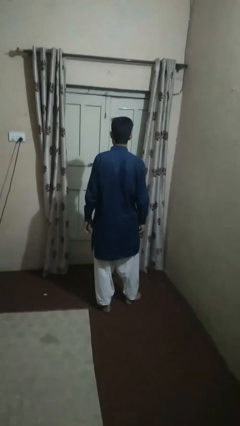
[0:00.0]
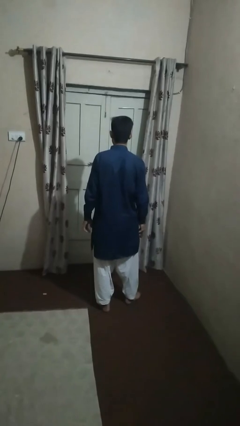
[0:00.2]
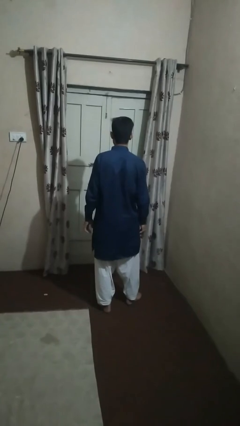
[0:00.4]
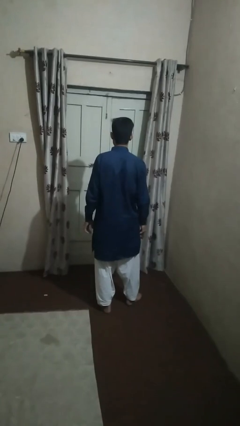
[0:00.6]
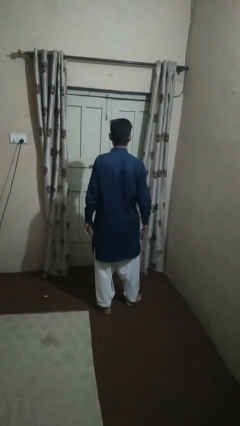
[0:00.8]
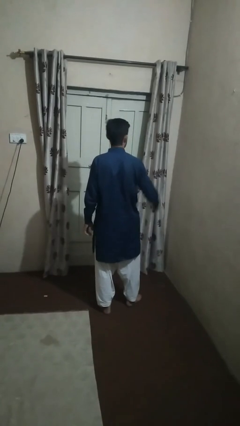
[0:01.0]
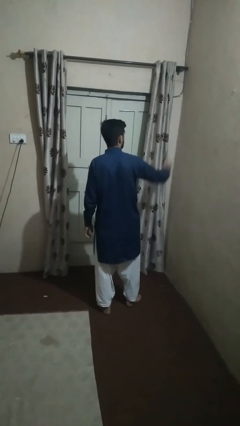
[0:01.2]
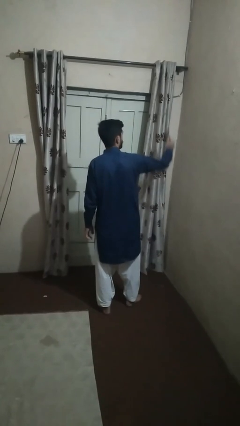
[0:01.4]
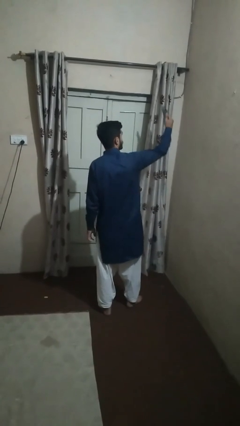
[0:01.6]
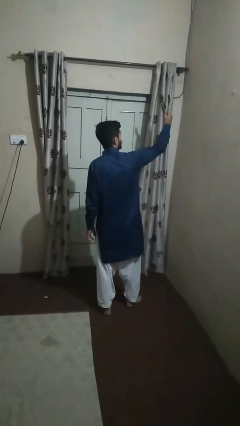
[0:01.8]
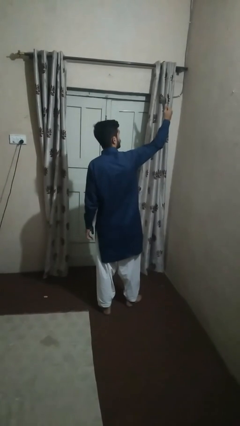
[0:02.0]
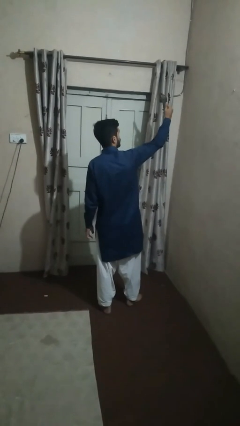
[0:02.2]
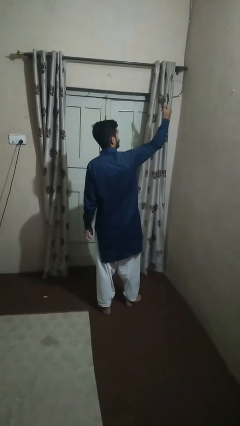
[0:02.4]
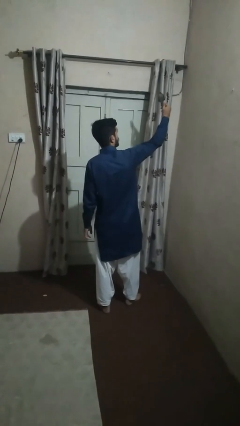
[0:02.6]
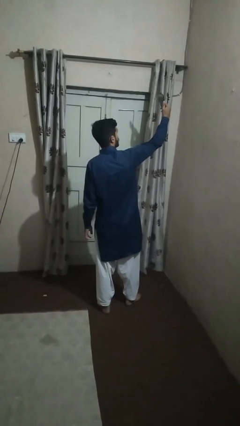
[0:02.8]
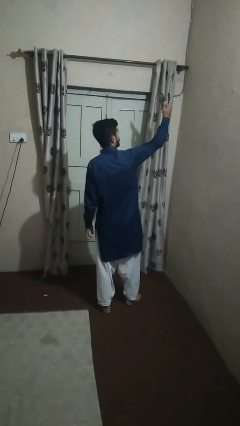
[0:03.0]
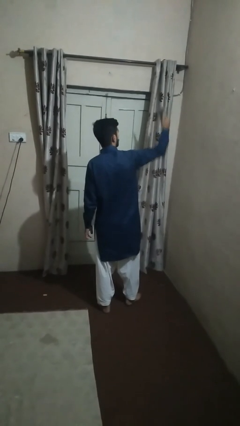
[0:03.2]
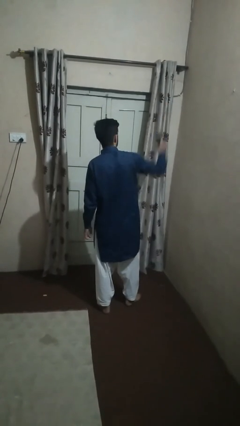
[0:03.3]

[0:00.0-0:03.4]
person takes selfie

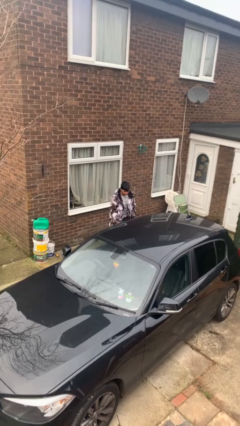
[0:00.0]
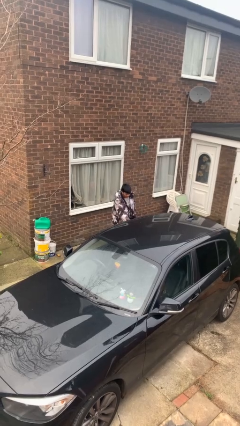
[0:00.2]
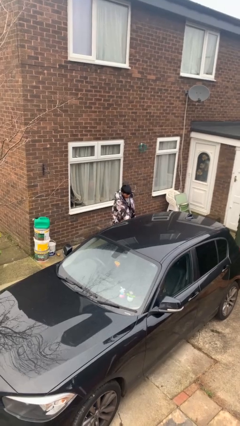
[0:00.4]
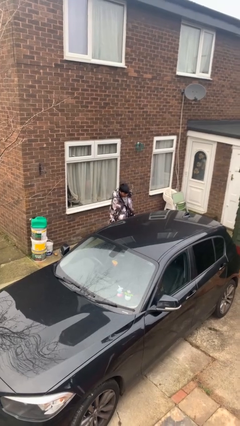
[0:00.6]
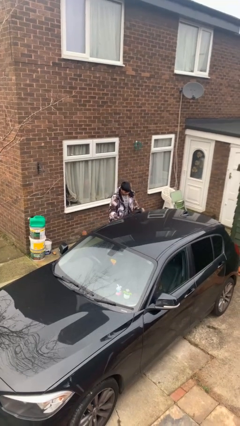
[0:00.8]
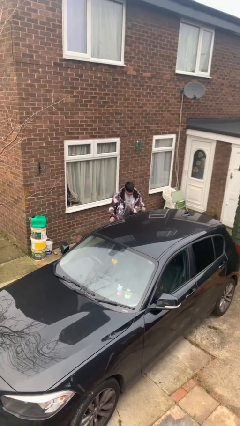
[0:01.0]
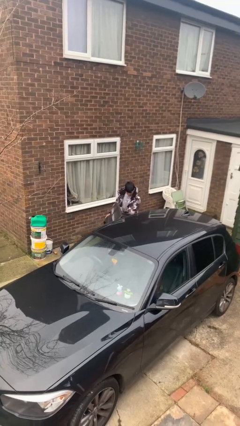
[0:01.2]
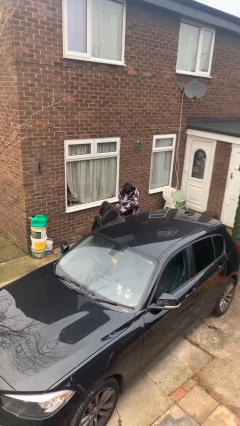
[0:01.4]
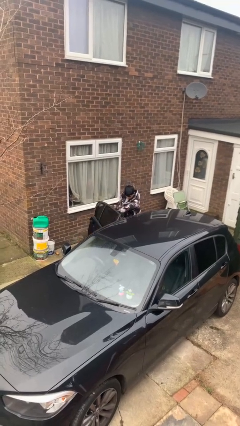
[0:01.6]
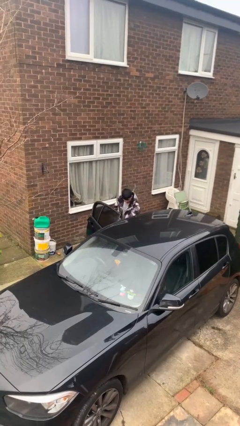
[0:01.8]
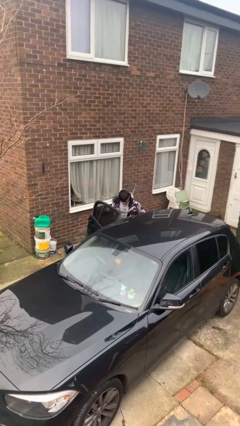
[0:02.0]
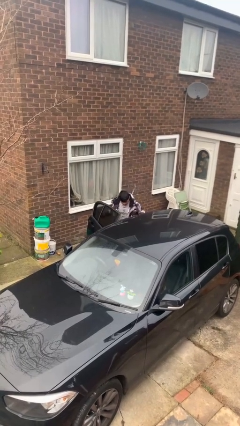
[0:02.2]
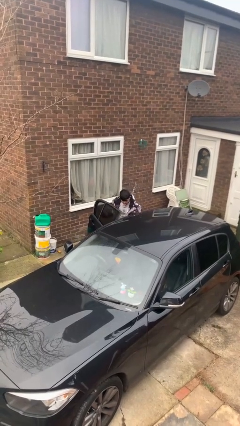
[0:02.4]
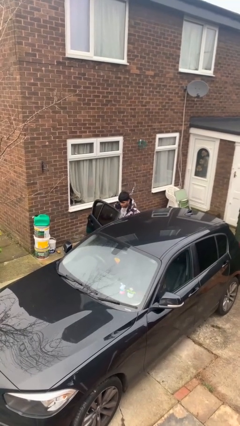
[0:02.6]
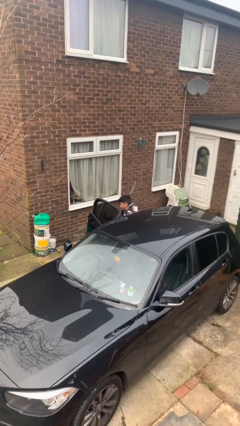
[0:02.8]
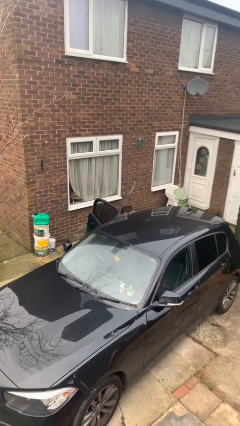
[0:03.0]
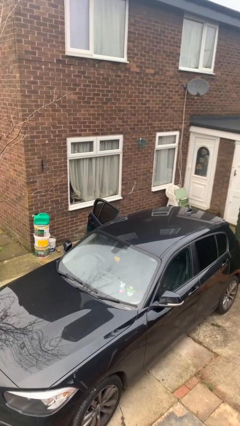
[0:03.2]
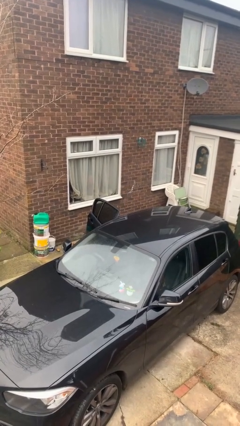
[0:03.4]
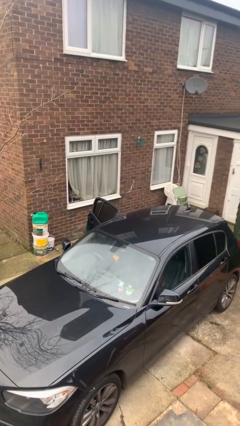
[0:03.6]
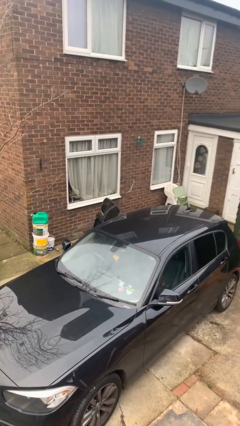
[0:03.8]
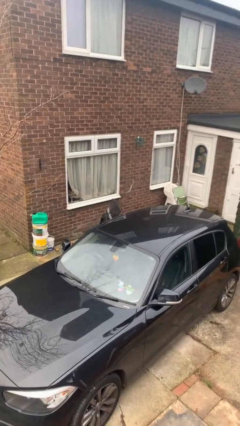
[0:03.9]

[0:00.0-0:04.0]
car picks up person

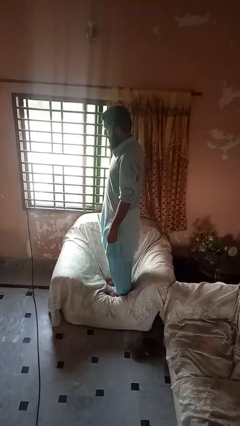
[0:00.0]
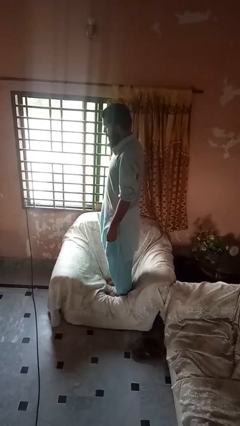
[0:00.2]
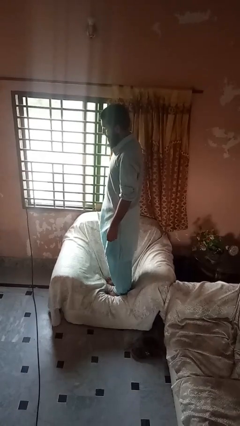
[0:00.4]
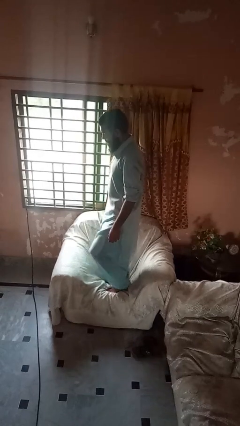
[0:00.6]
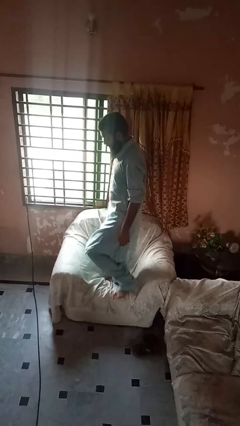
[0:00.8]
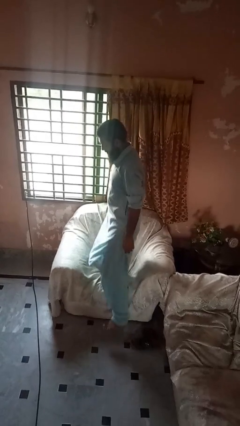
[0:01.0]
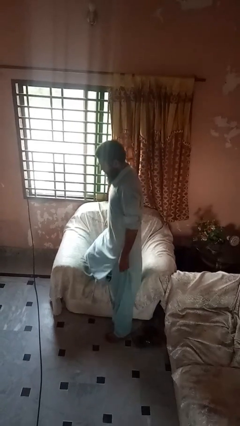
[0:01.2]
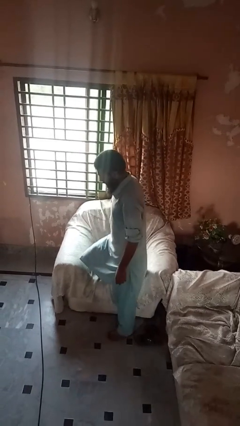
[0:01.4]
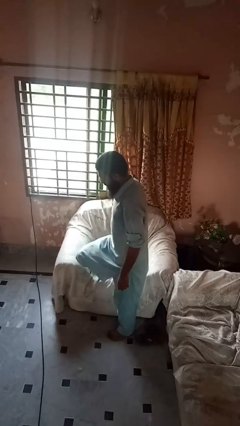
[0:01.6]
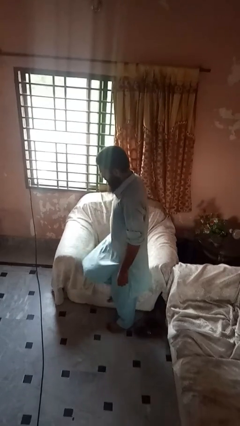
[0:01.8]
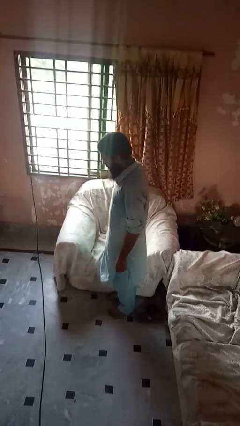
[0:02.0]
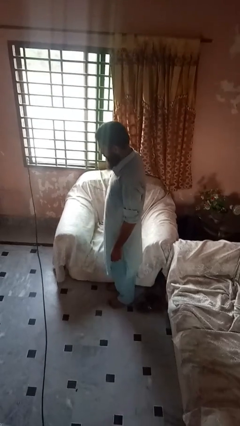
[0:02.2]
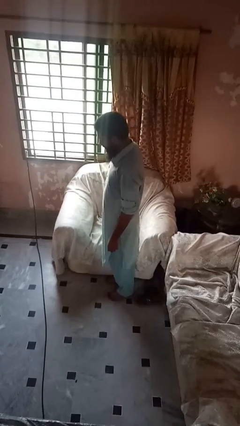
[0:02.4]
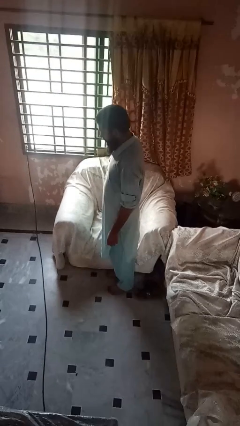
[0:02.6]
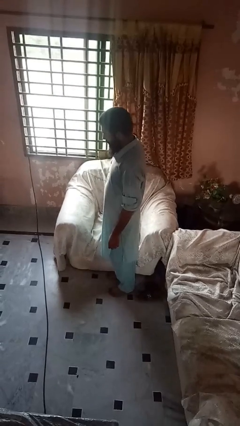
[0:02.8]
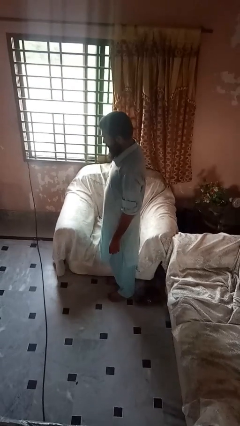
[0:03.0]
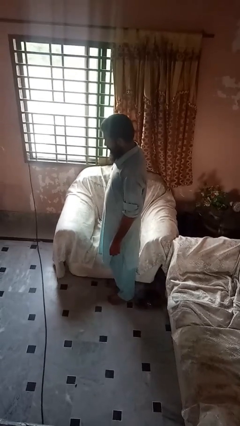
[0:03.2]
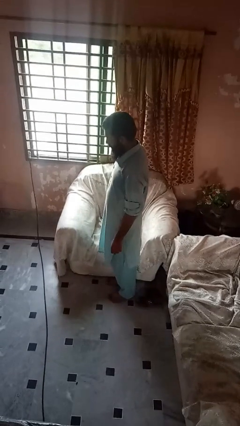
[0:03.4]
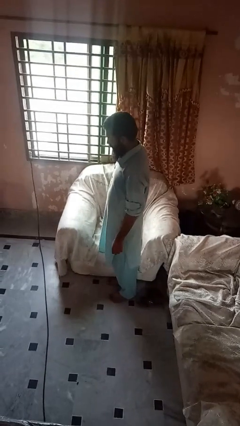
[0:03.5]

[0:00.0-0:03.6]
person climbs off couch

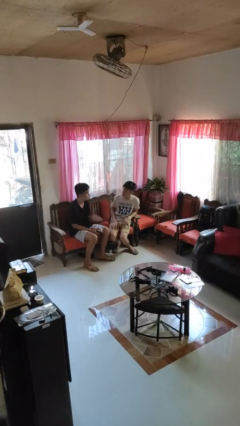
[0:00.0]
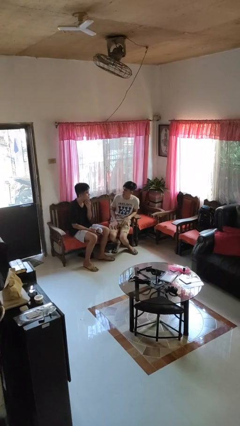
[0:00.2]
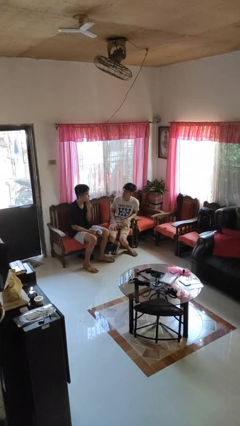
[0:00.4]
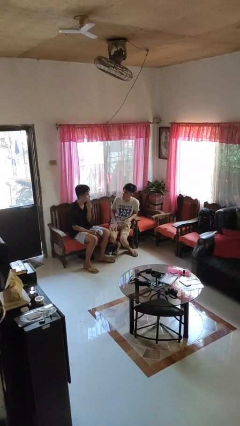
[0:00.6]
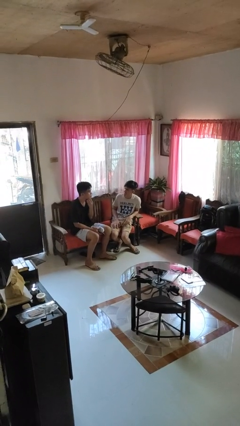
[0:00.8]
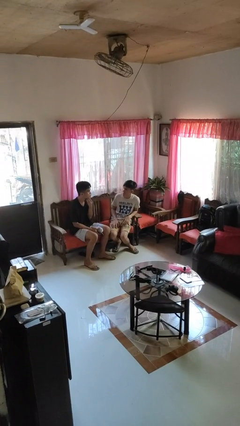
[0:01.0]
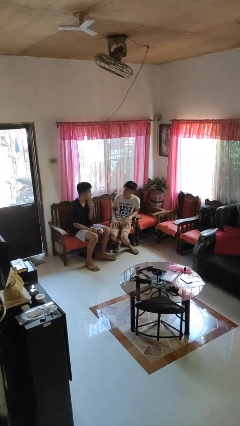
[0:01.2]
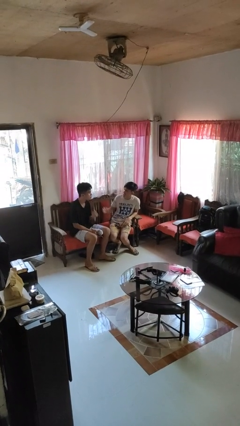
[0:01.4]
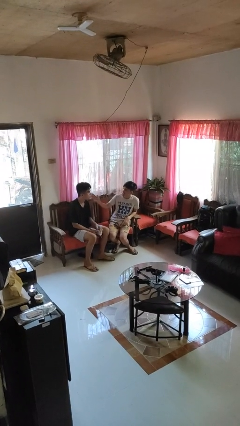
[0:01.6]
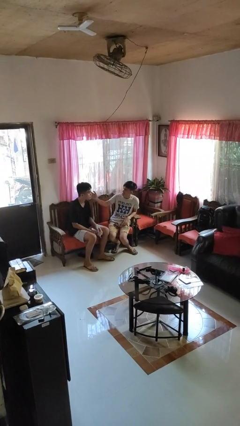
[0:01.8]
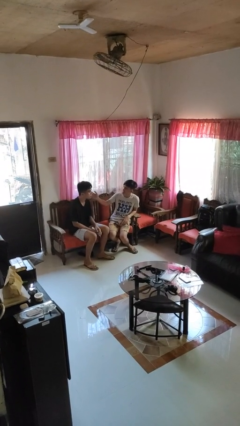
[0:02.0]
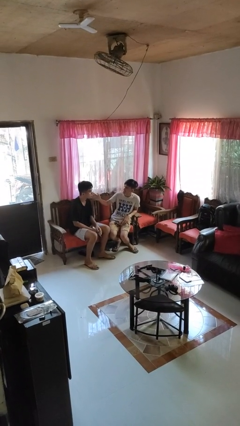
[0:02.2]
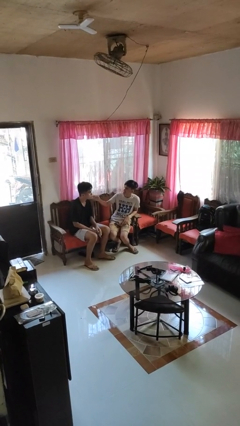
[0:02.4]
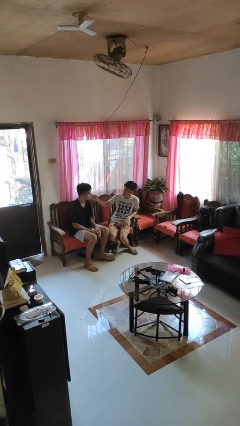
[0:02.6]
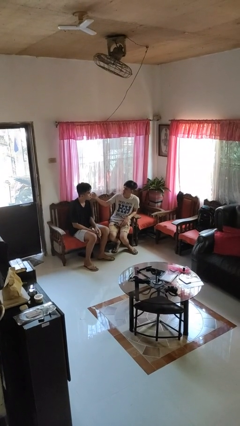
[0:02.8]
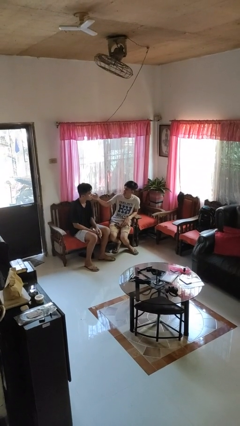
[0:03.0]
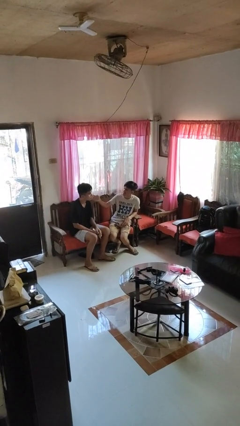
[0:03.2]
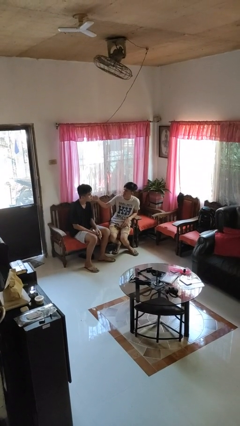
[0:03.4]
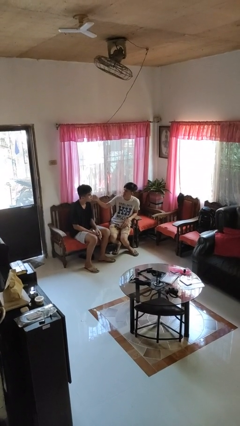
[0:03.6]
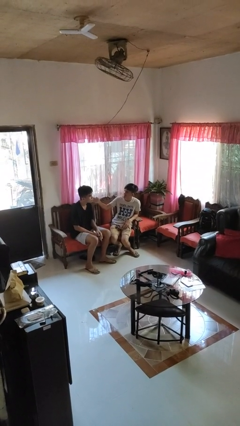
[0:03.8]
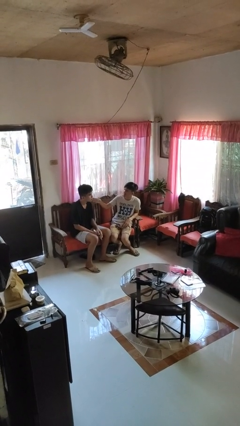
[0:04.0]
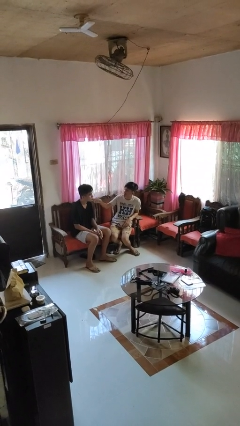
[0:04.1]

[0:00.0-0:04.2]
person touches face of person

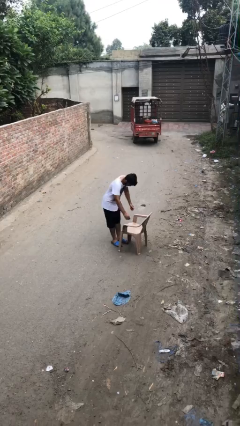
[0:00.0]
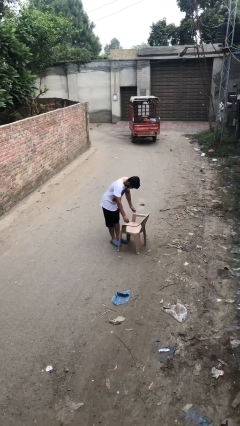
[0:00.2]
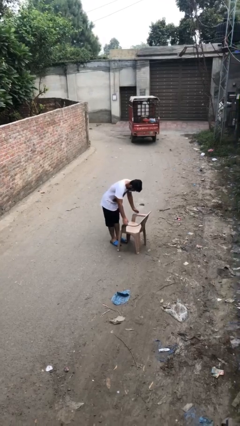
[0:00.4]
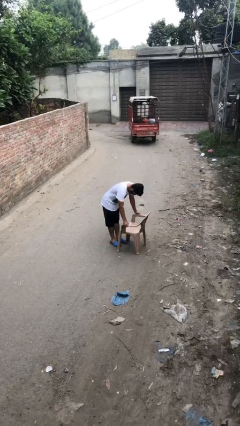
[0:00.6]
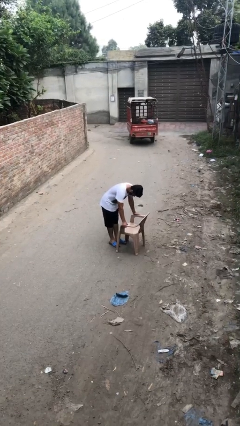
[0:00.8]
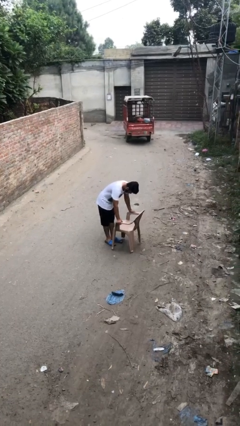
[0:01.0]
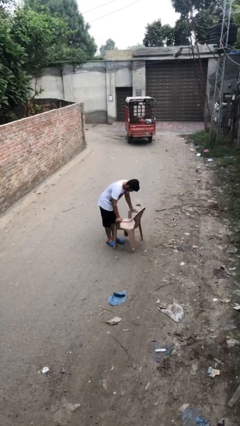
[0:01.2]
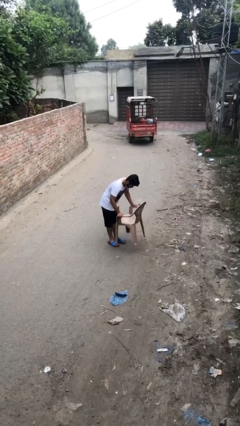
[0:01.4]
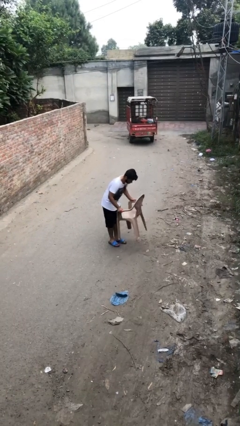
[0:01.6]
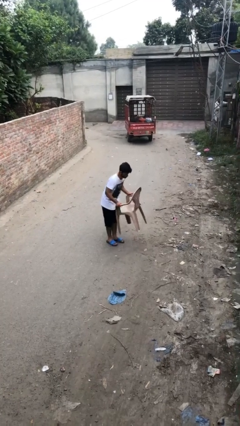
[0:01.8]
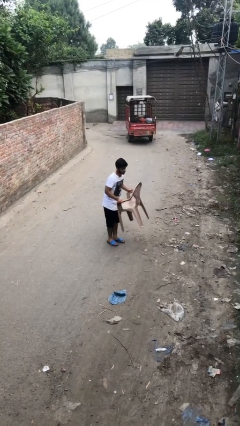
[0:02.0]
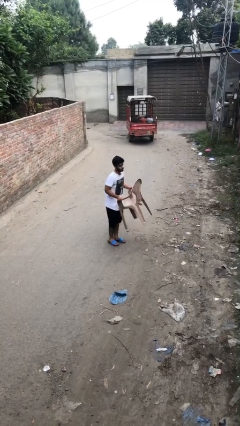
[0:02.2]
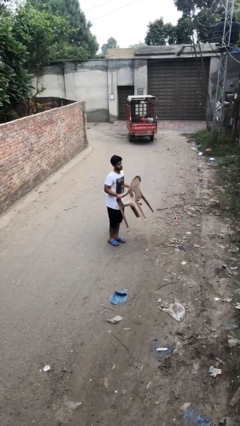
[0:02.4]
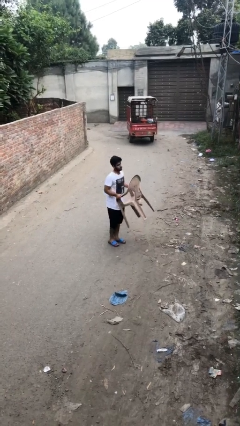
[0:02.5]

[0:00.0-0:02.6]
person picks up object from floor

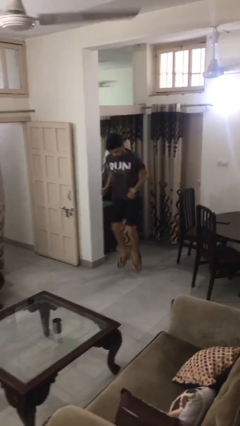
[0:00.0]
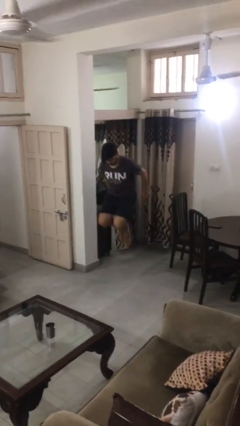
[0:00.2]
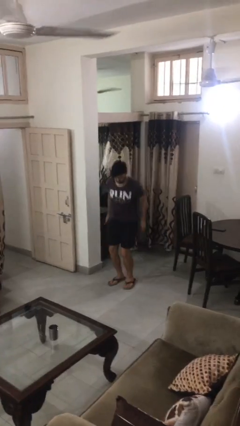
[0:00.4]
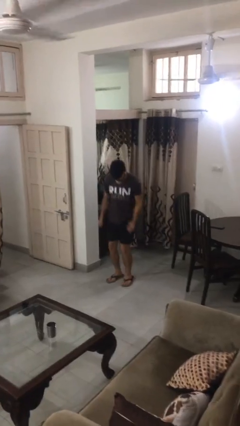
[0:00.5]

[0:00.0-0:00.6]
person jumps
